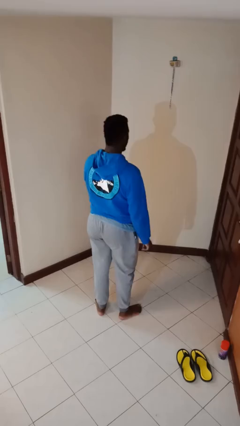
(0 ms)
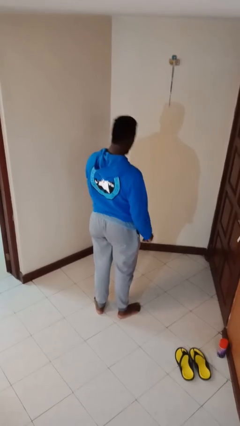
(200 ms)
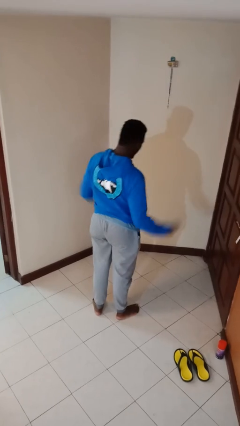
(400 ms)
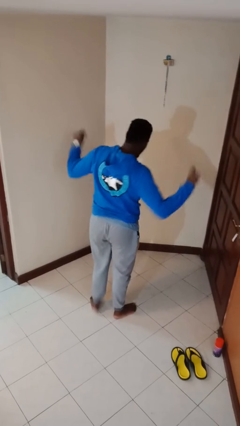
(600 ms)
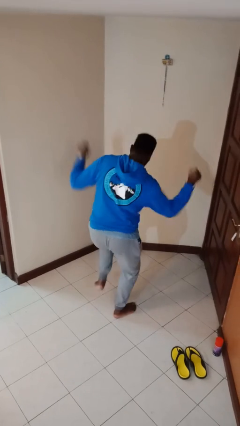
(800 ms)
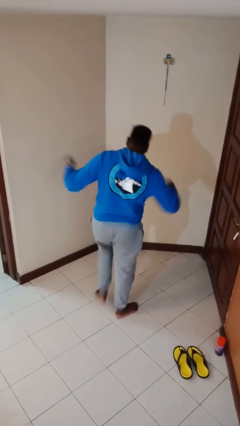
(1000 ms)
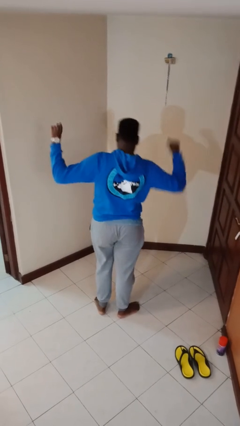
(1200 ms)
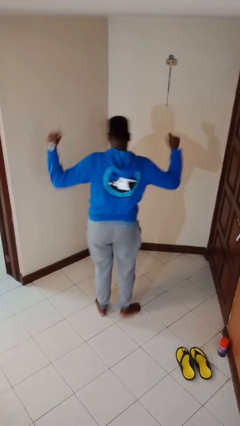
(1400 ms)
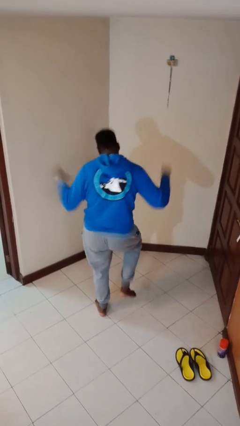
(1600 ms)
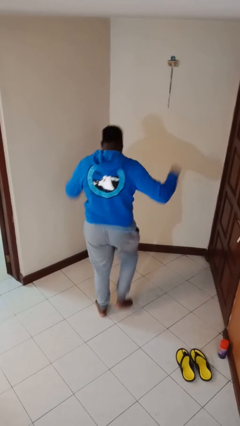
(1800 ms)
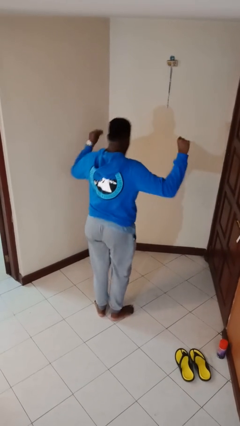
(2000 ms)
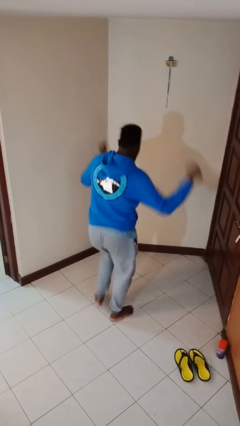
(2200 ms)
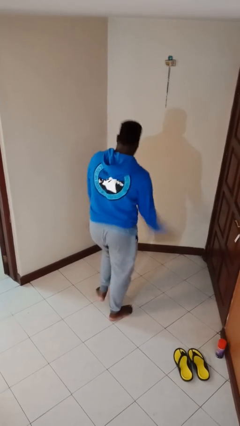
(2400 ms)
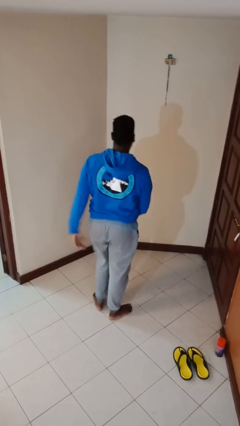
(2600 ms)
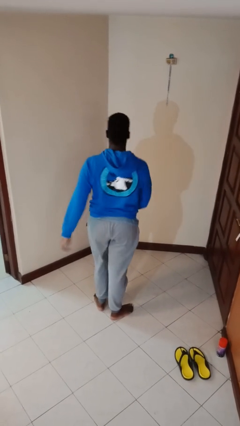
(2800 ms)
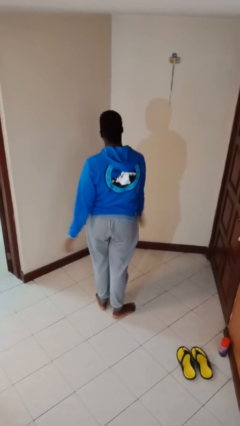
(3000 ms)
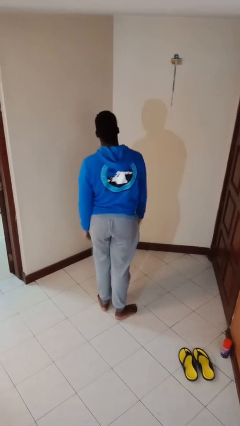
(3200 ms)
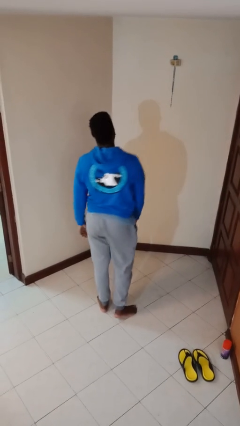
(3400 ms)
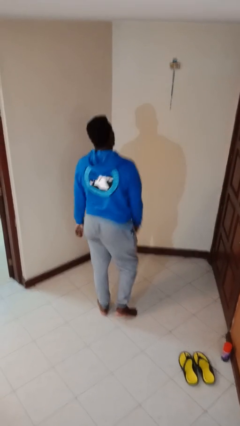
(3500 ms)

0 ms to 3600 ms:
person dances in place

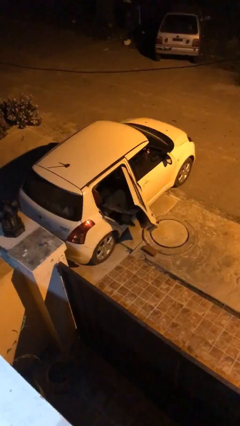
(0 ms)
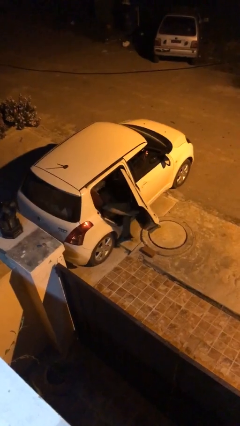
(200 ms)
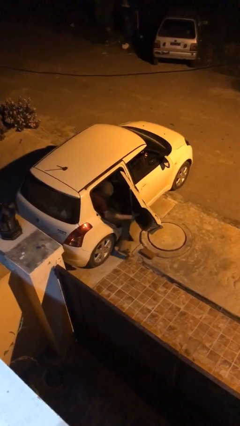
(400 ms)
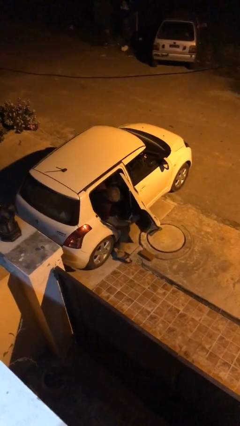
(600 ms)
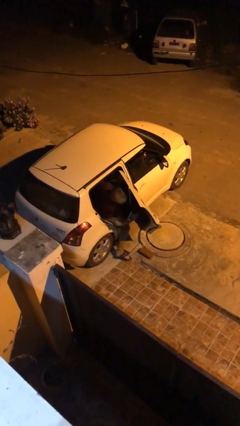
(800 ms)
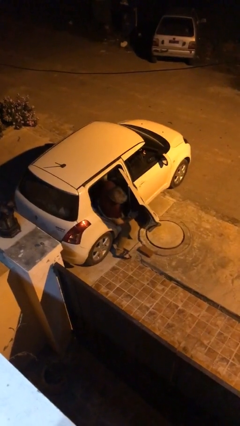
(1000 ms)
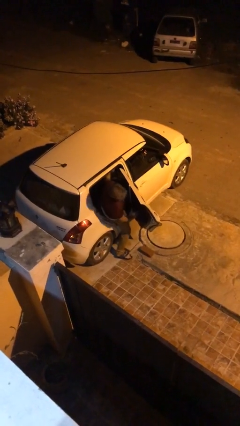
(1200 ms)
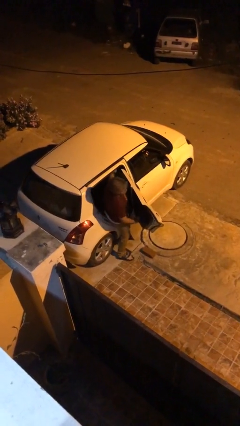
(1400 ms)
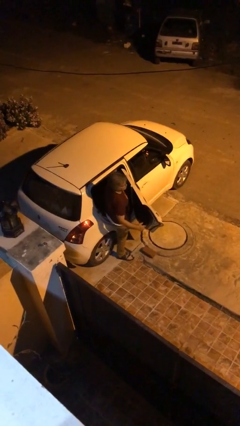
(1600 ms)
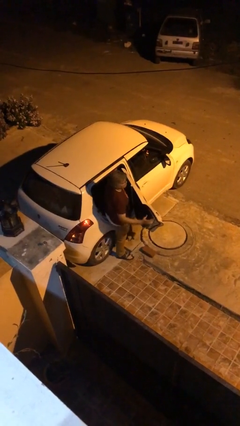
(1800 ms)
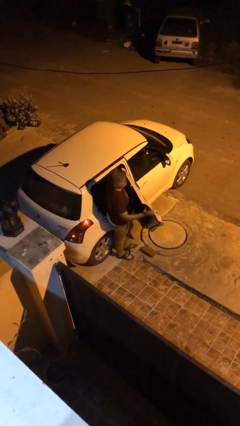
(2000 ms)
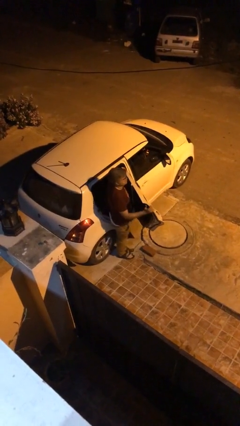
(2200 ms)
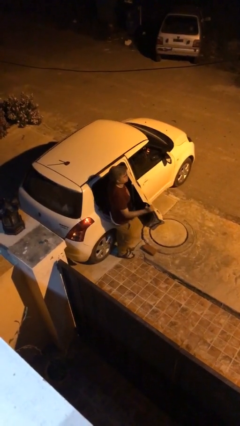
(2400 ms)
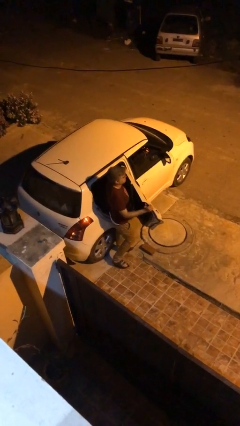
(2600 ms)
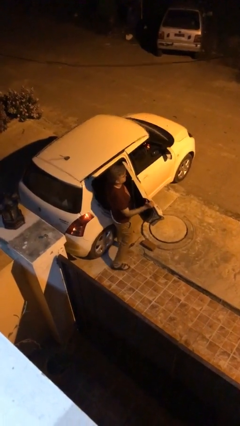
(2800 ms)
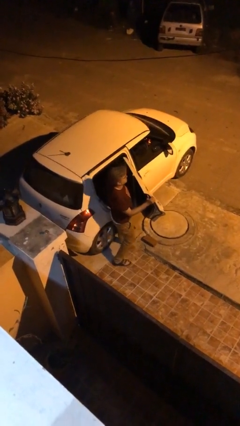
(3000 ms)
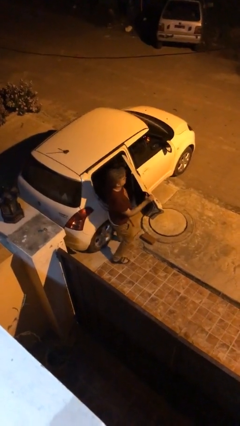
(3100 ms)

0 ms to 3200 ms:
person exits car

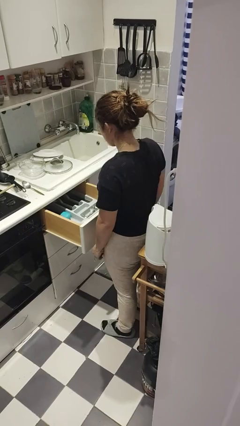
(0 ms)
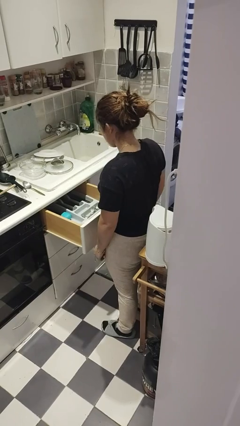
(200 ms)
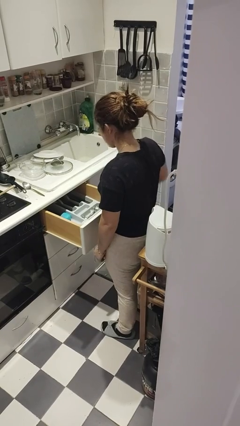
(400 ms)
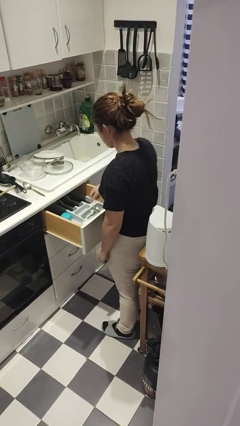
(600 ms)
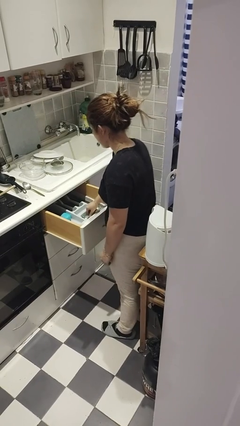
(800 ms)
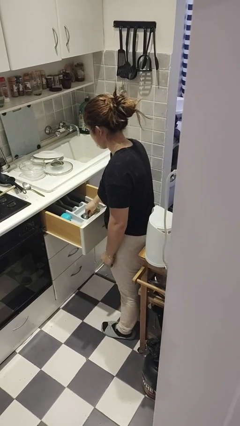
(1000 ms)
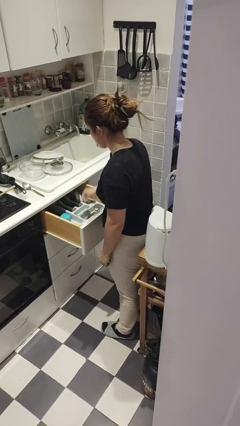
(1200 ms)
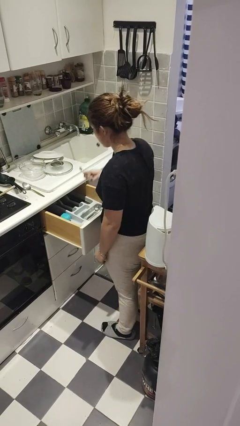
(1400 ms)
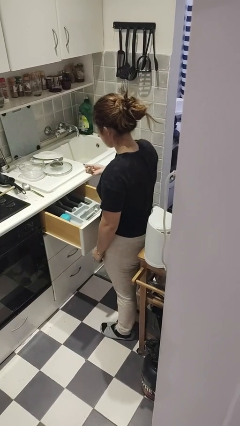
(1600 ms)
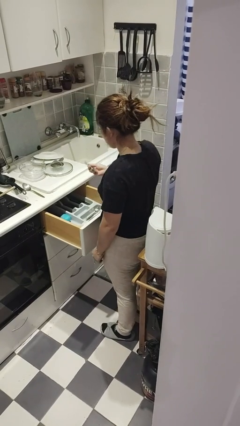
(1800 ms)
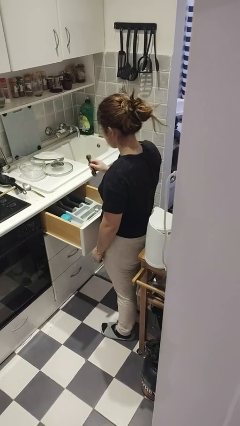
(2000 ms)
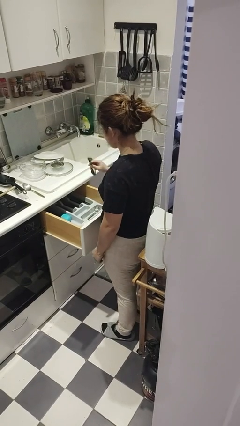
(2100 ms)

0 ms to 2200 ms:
person takes object from kitchen drawer

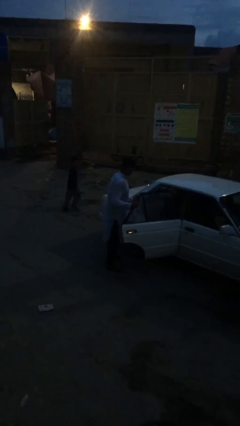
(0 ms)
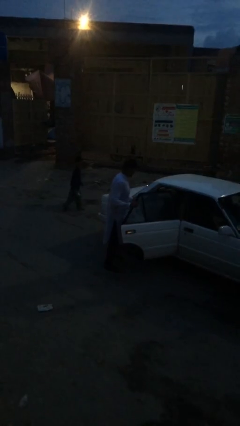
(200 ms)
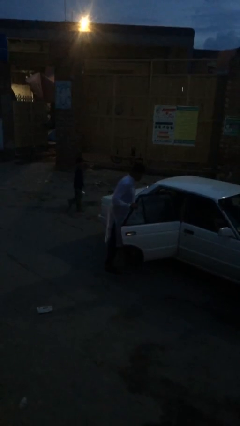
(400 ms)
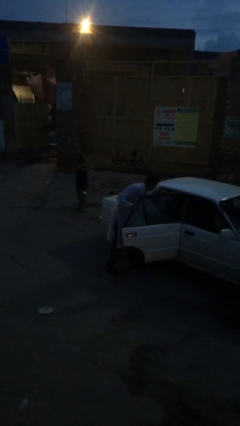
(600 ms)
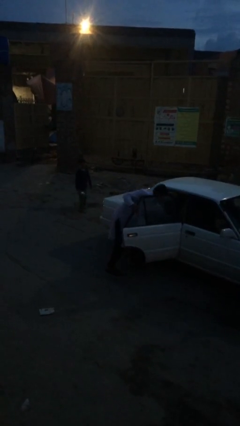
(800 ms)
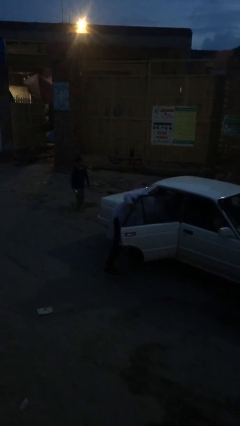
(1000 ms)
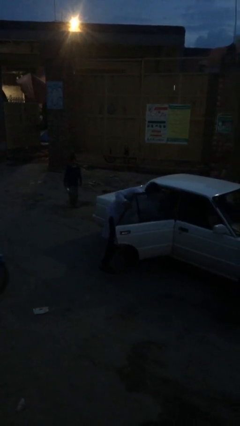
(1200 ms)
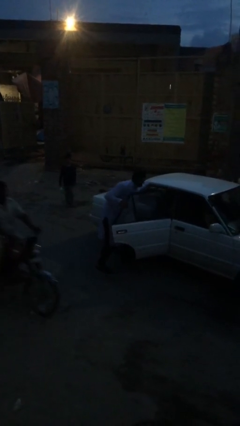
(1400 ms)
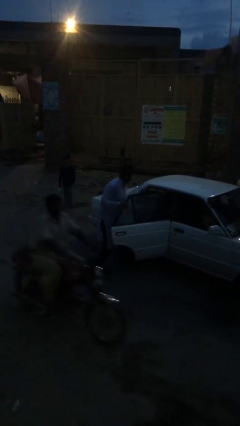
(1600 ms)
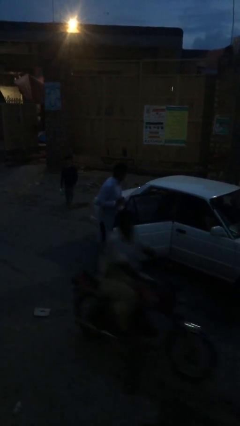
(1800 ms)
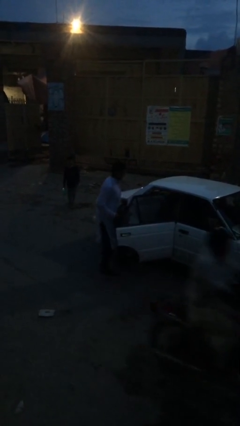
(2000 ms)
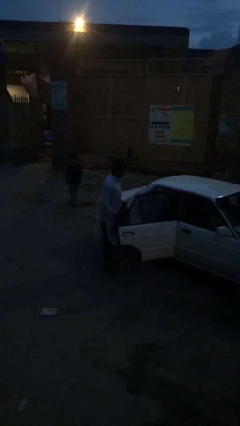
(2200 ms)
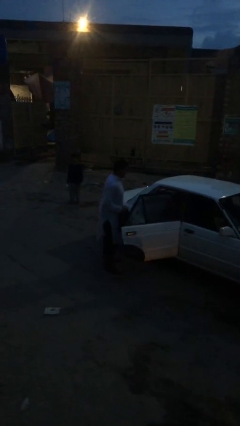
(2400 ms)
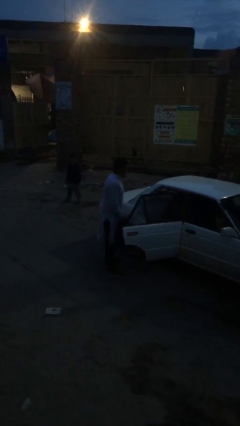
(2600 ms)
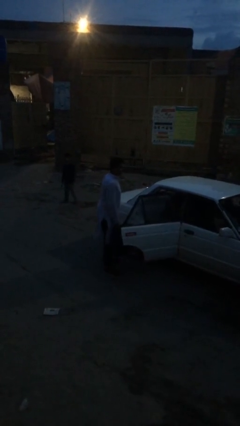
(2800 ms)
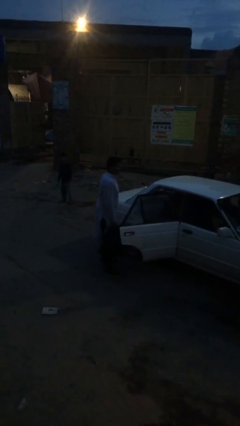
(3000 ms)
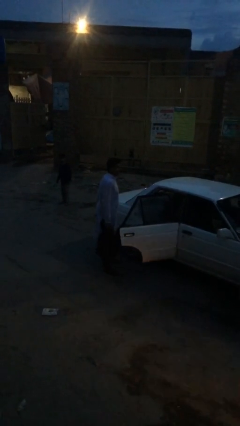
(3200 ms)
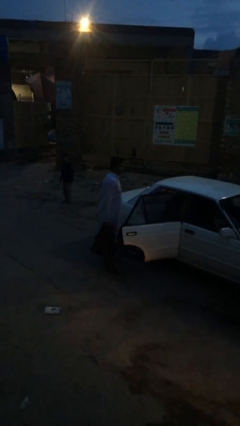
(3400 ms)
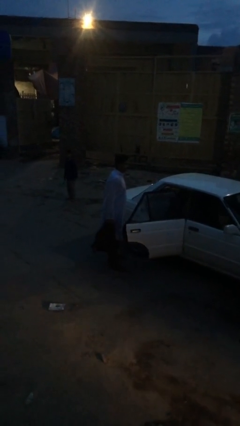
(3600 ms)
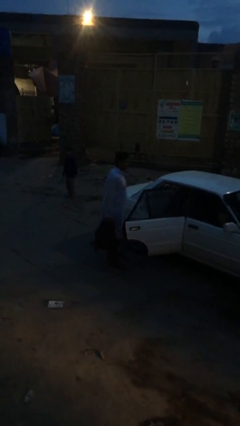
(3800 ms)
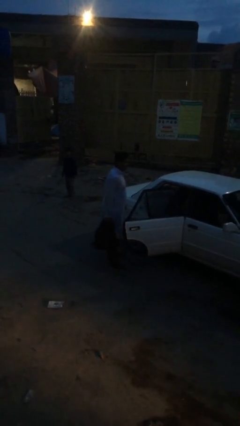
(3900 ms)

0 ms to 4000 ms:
person unloads car

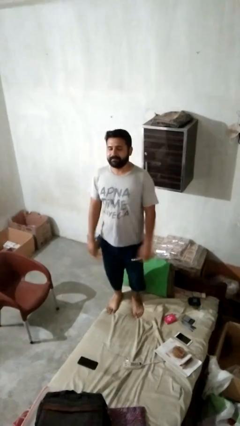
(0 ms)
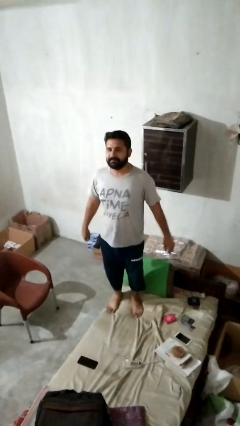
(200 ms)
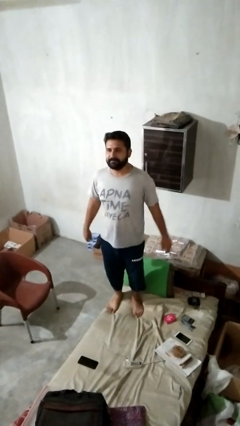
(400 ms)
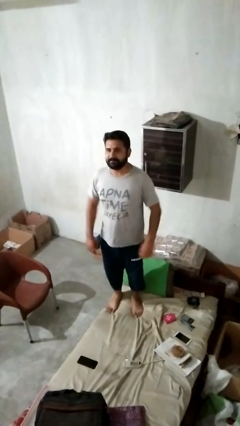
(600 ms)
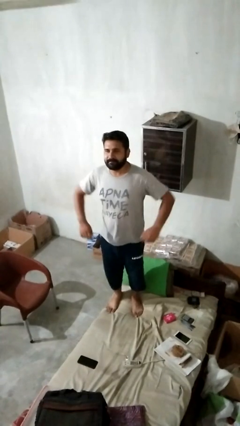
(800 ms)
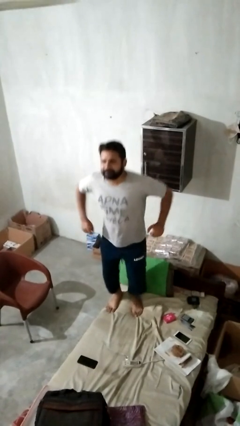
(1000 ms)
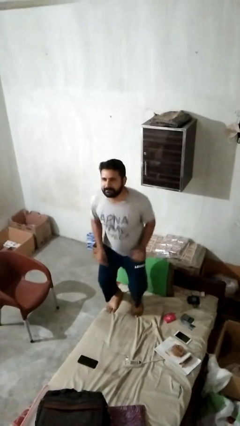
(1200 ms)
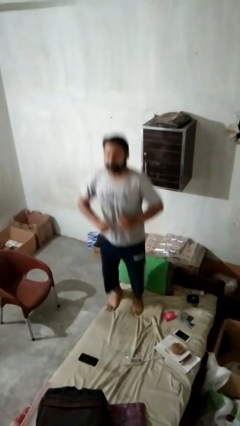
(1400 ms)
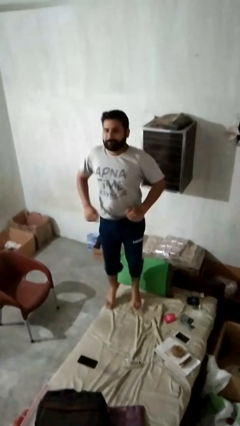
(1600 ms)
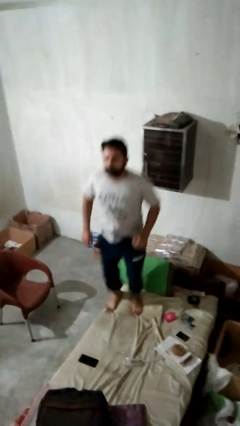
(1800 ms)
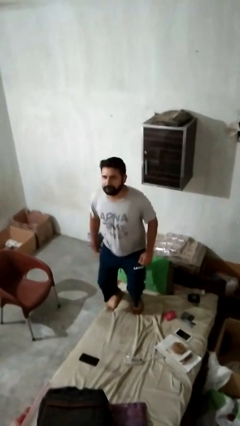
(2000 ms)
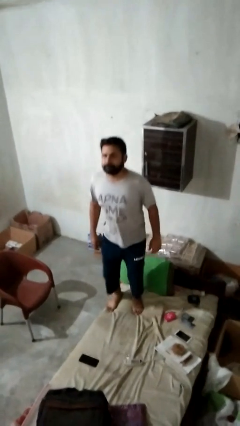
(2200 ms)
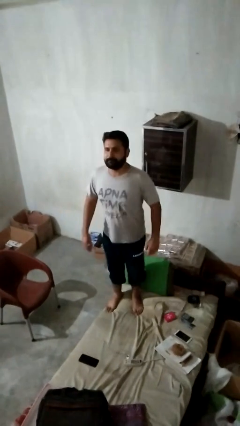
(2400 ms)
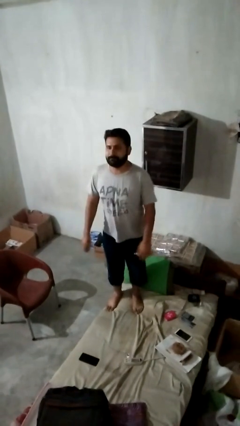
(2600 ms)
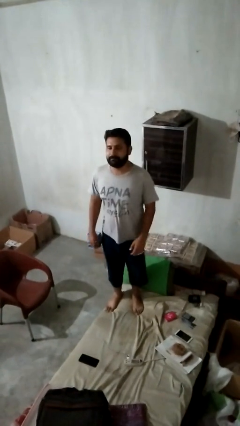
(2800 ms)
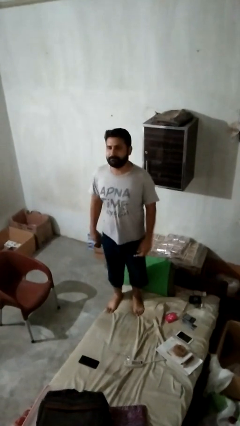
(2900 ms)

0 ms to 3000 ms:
person jumps on bed

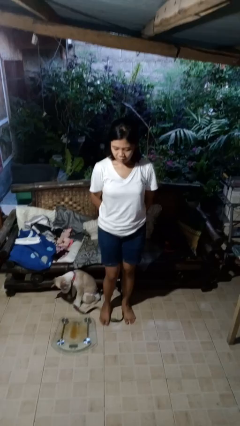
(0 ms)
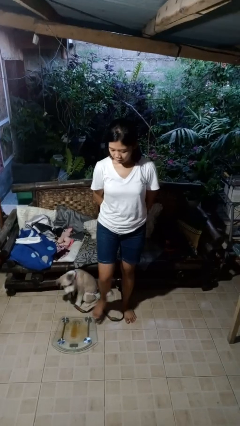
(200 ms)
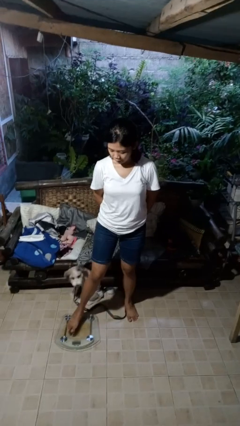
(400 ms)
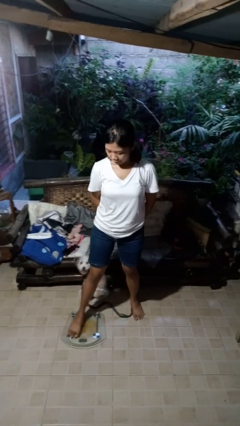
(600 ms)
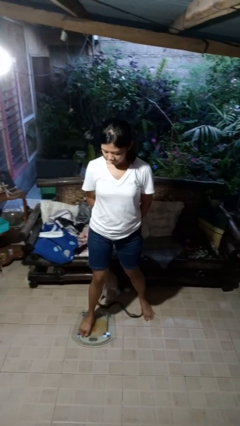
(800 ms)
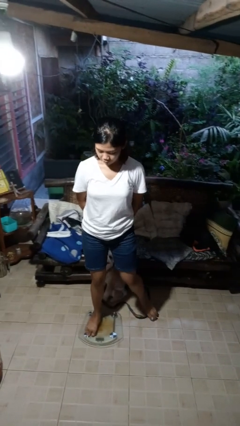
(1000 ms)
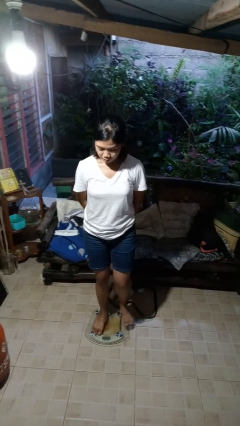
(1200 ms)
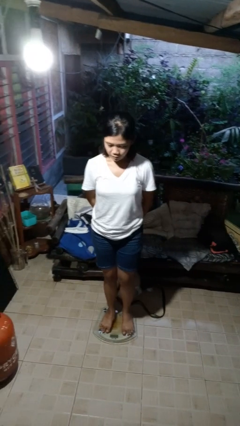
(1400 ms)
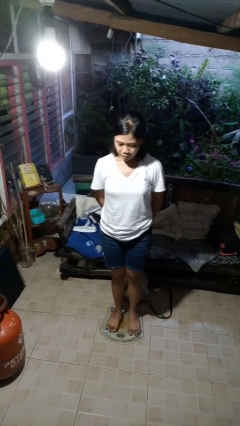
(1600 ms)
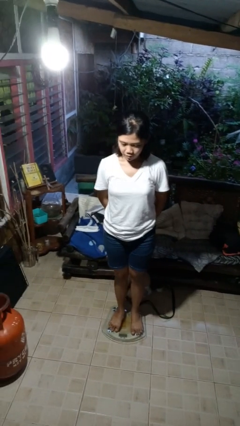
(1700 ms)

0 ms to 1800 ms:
person uses bodyweight scale
